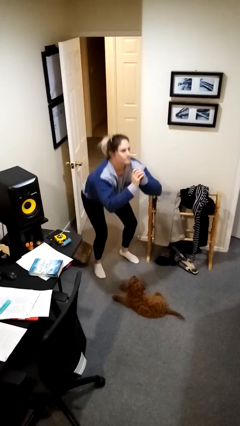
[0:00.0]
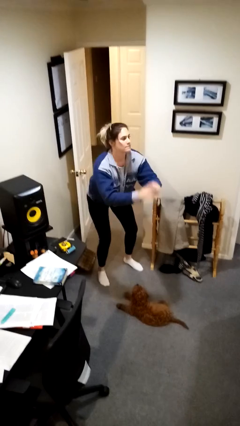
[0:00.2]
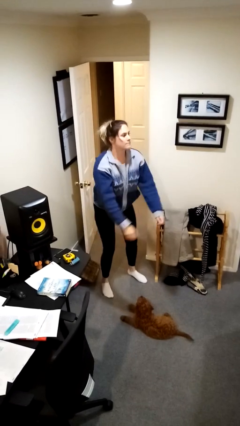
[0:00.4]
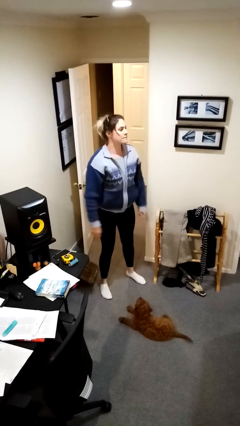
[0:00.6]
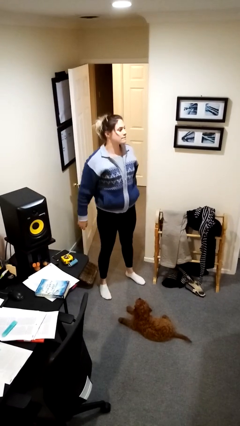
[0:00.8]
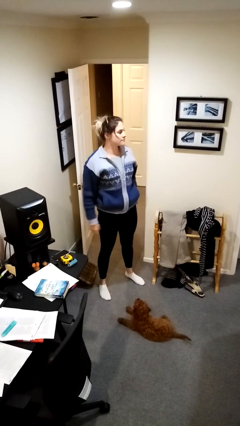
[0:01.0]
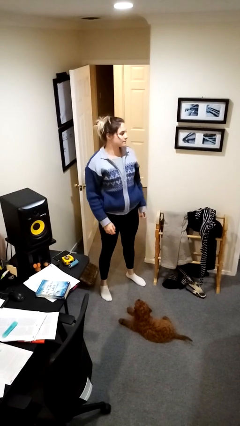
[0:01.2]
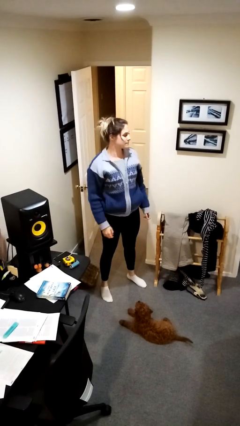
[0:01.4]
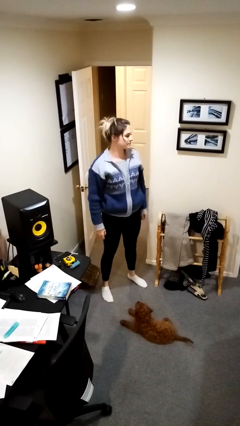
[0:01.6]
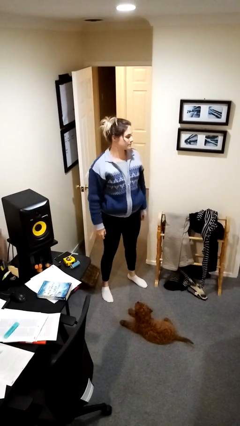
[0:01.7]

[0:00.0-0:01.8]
person stands up

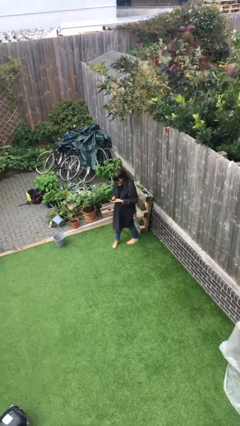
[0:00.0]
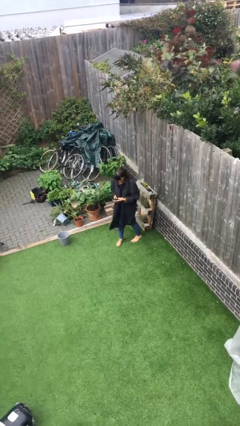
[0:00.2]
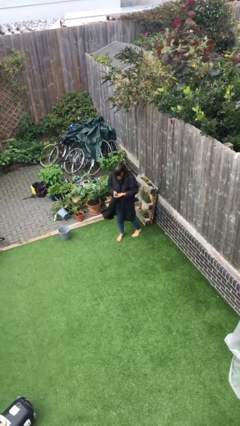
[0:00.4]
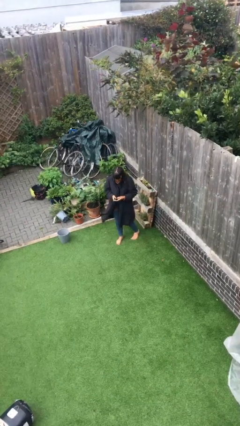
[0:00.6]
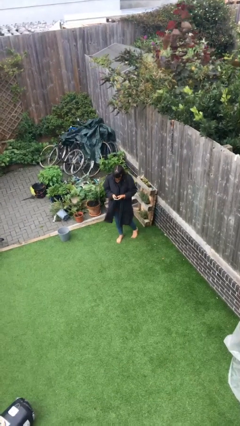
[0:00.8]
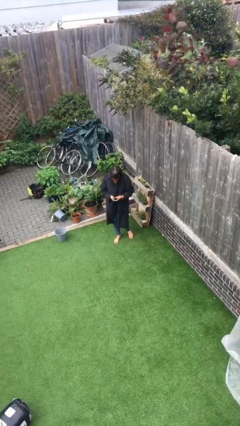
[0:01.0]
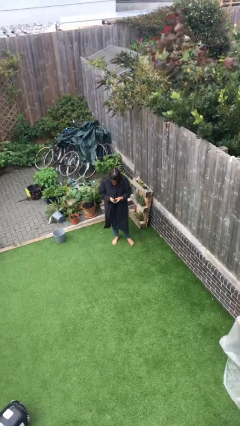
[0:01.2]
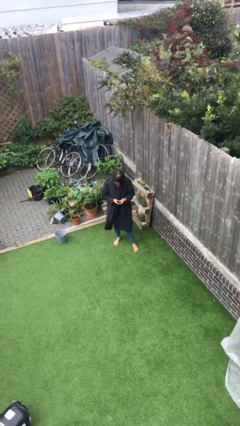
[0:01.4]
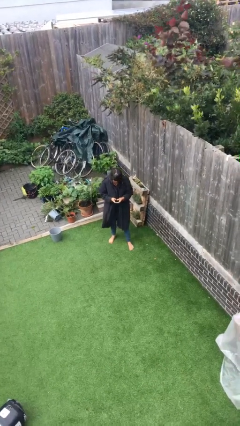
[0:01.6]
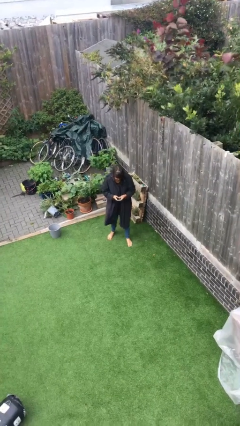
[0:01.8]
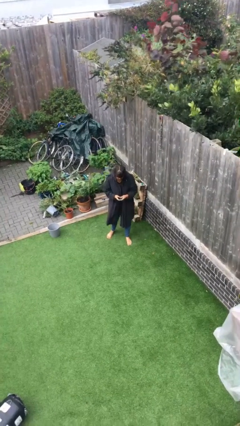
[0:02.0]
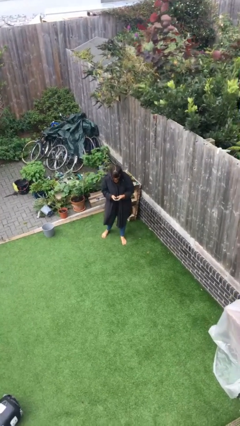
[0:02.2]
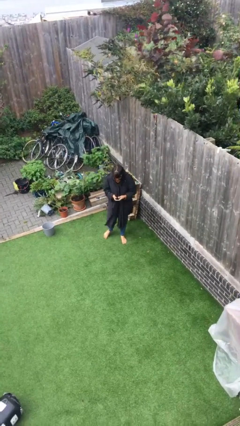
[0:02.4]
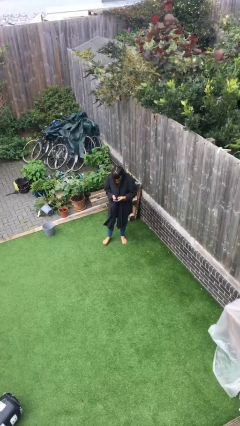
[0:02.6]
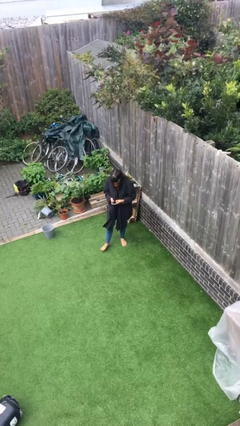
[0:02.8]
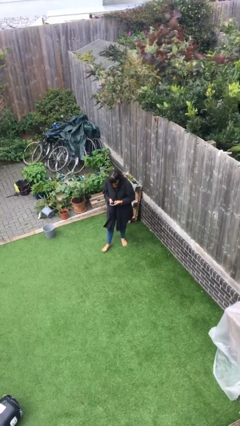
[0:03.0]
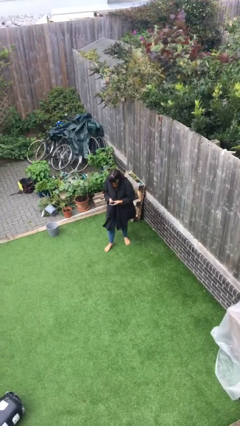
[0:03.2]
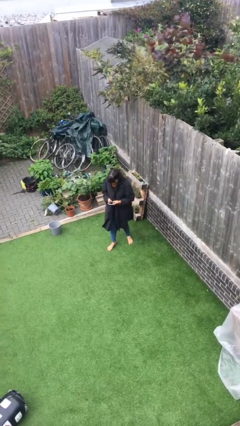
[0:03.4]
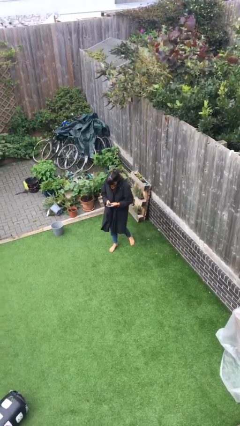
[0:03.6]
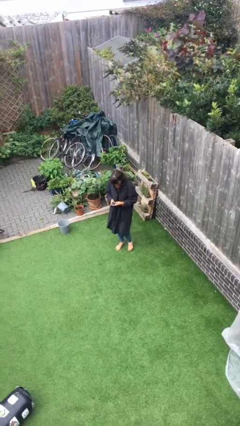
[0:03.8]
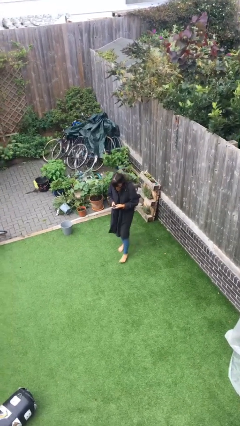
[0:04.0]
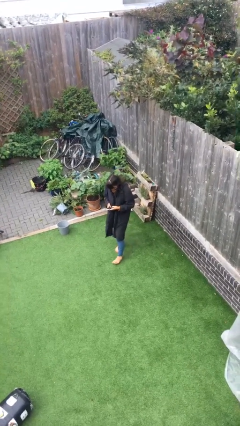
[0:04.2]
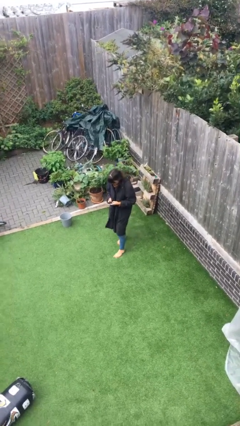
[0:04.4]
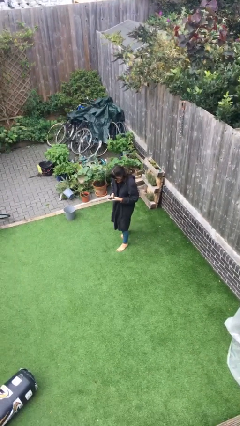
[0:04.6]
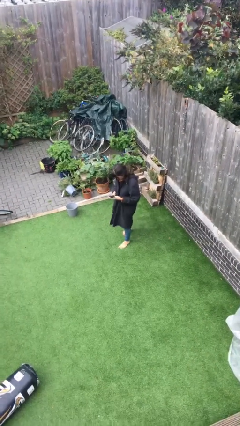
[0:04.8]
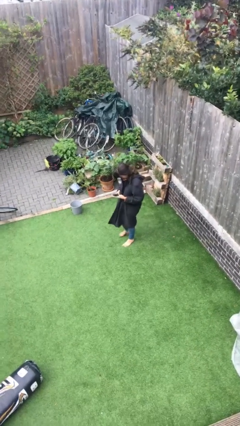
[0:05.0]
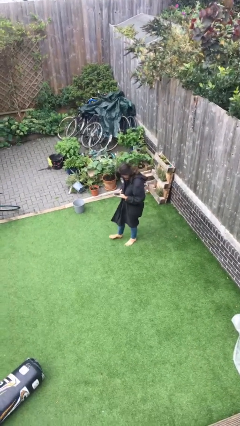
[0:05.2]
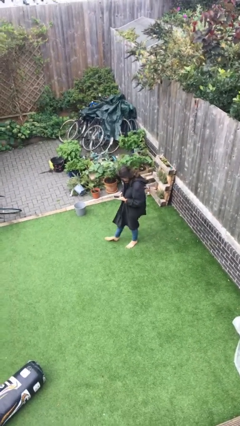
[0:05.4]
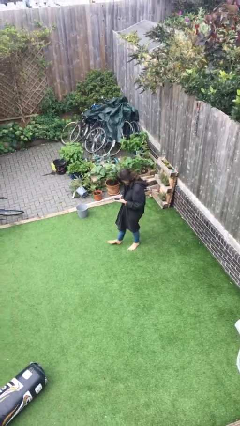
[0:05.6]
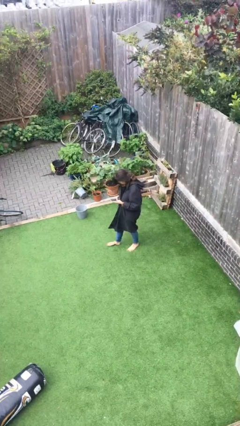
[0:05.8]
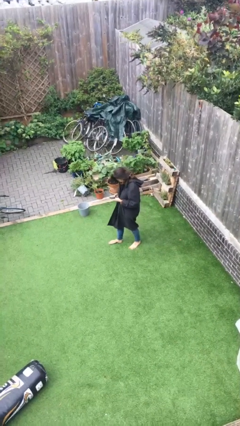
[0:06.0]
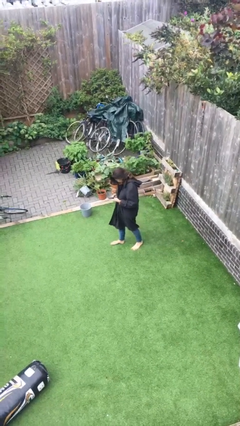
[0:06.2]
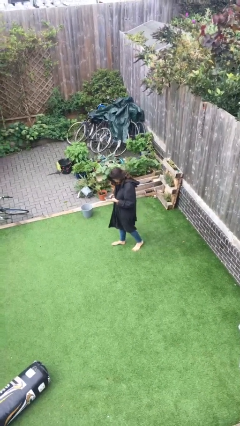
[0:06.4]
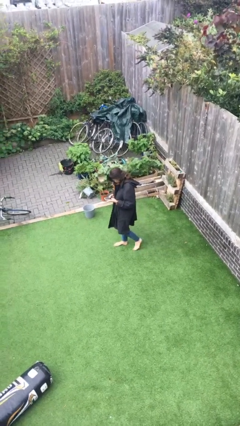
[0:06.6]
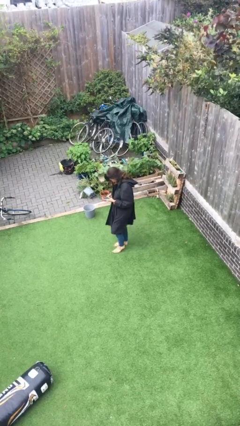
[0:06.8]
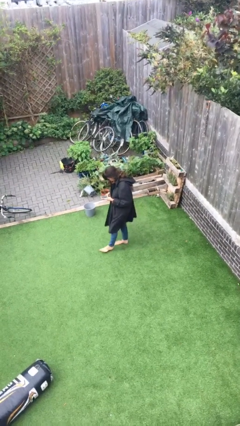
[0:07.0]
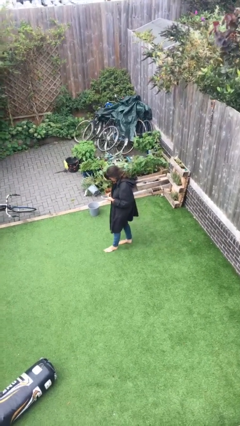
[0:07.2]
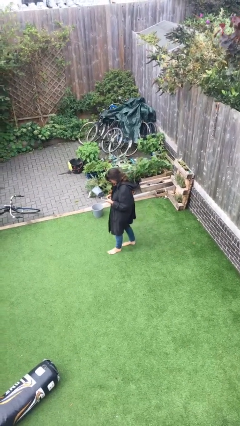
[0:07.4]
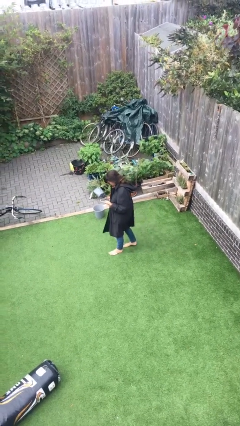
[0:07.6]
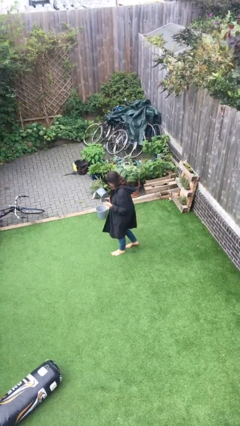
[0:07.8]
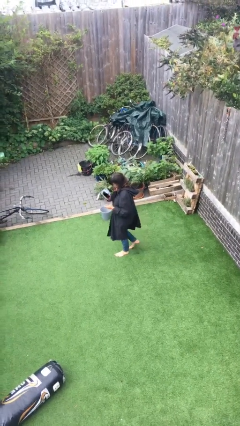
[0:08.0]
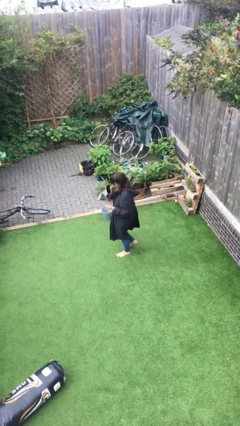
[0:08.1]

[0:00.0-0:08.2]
person texts on phone

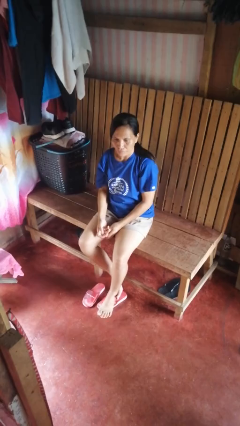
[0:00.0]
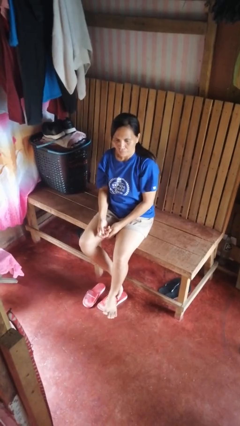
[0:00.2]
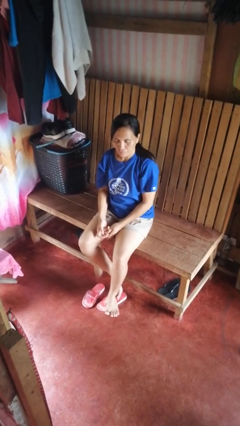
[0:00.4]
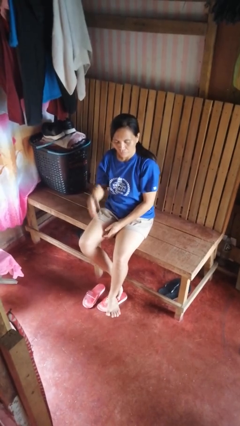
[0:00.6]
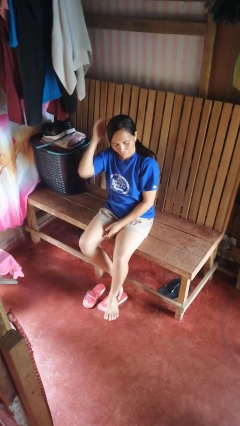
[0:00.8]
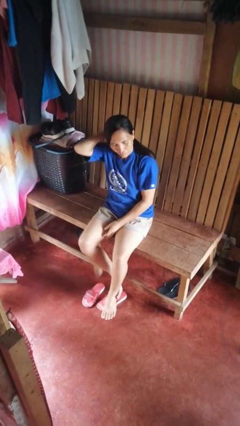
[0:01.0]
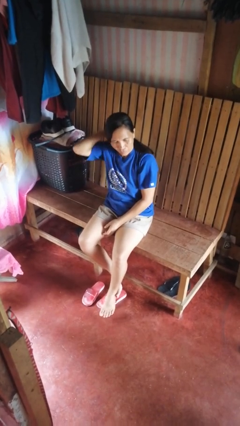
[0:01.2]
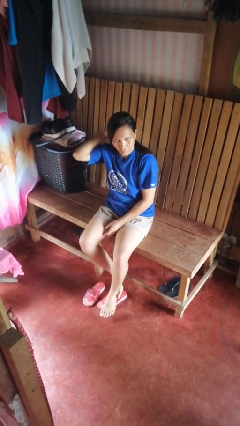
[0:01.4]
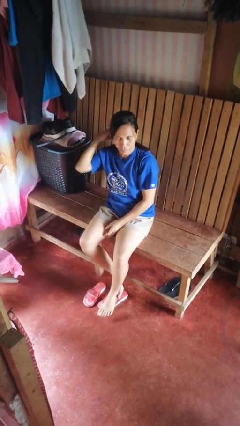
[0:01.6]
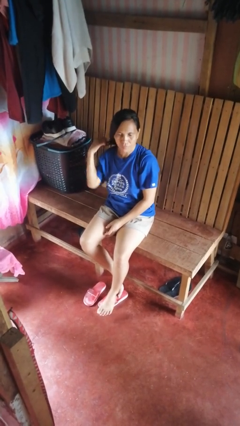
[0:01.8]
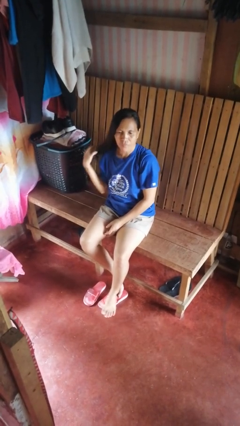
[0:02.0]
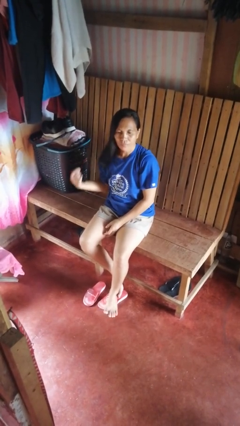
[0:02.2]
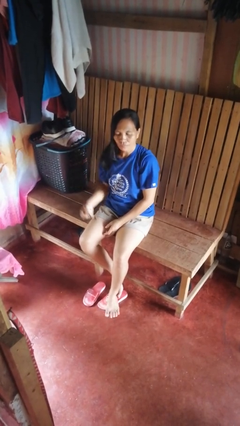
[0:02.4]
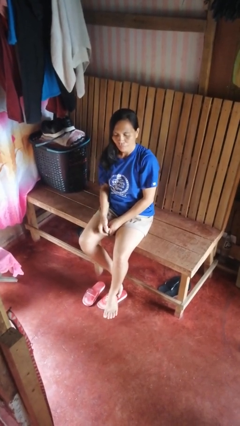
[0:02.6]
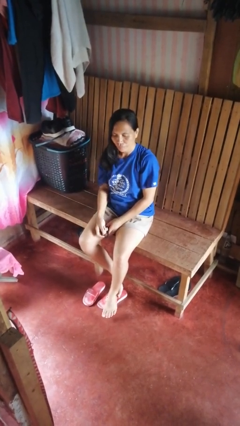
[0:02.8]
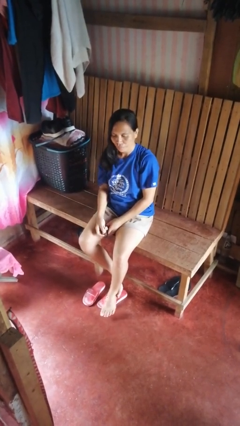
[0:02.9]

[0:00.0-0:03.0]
person takes off hairtie

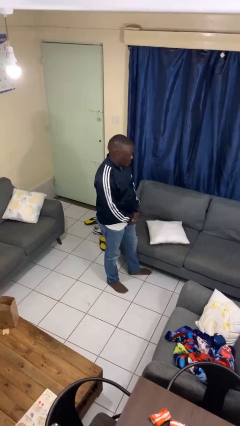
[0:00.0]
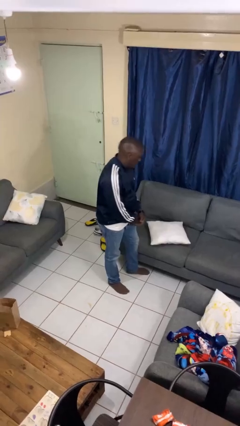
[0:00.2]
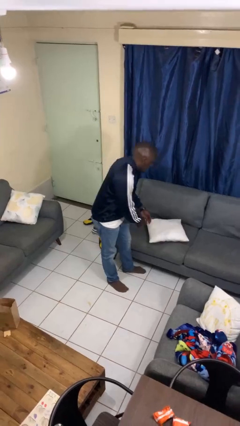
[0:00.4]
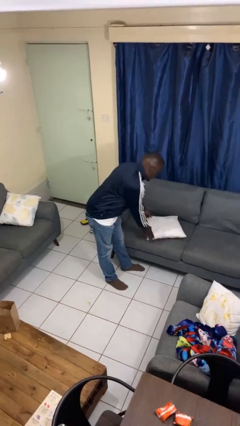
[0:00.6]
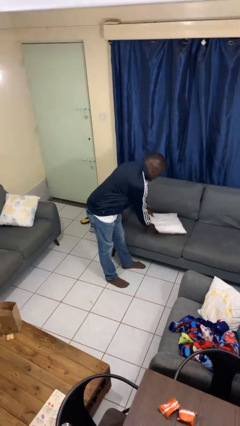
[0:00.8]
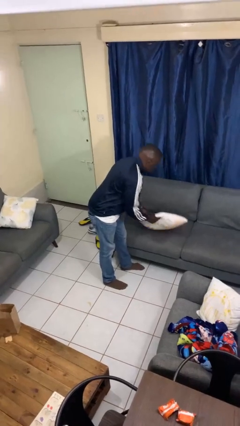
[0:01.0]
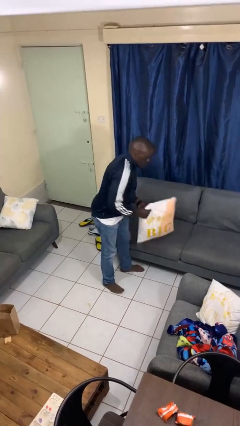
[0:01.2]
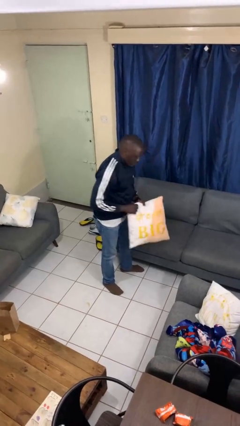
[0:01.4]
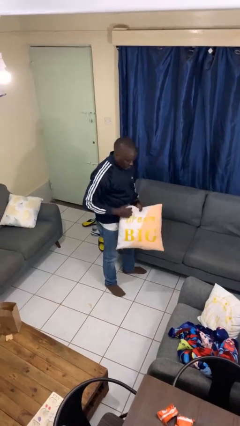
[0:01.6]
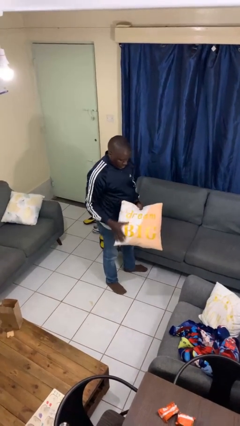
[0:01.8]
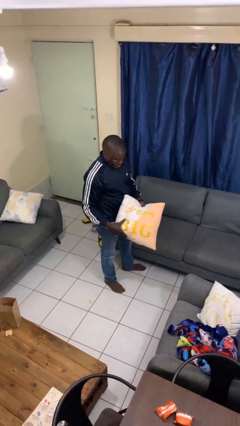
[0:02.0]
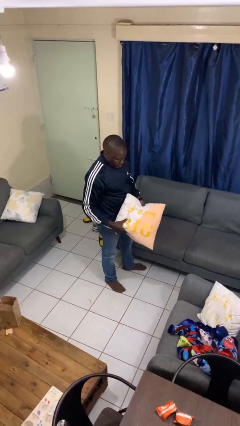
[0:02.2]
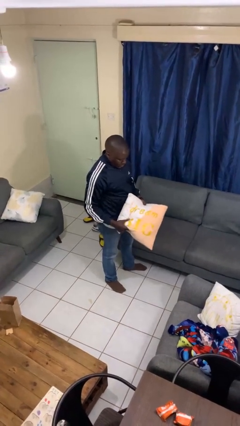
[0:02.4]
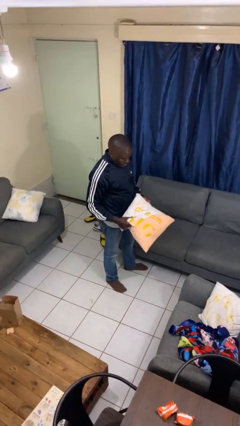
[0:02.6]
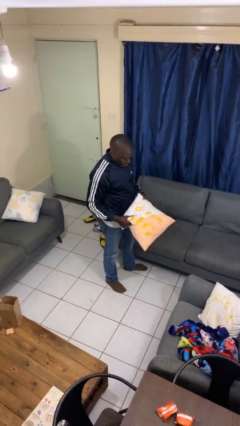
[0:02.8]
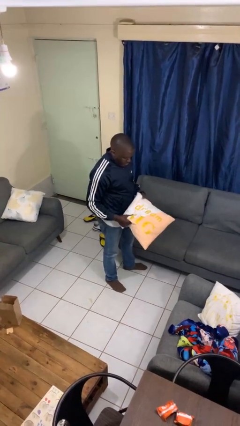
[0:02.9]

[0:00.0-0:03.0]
person picks up object from couch

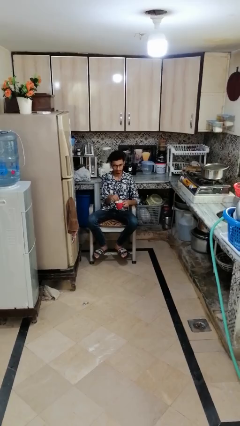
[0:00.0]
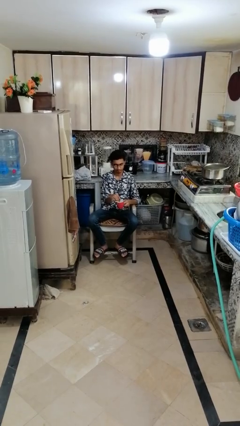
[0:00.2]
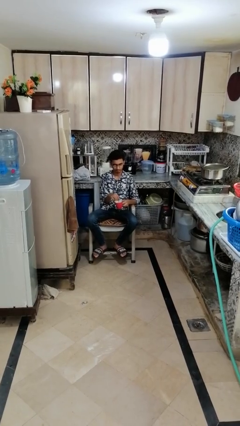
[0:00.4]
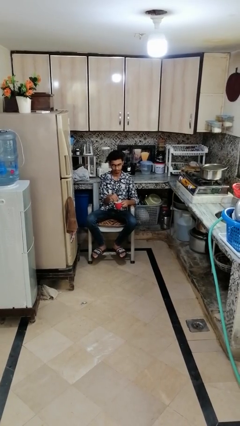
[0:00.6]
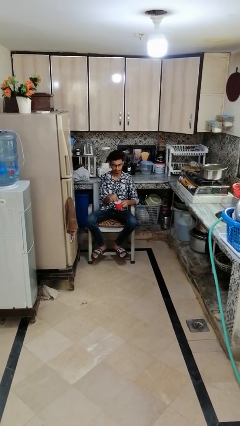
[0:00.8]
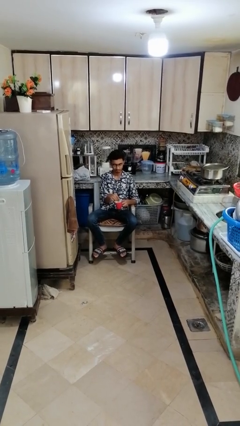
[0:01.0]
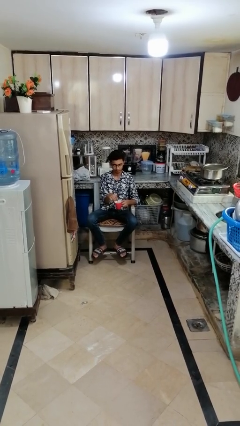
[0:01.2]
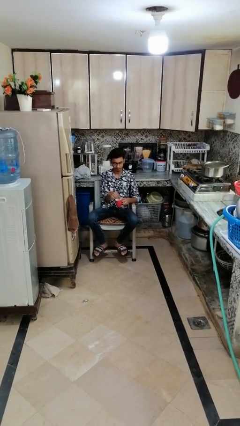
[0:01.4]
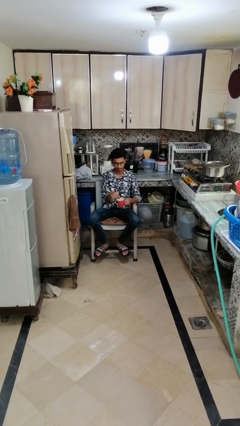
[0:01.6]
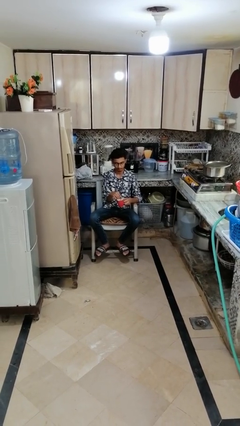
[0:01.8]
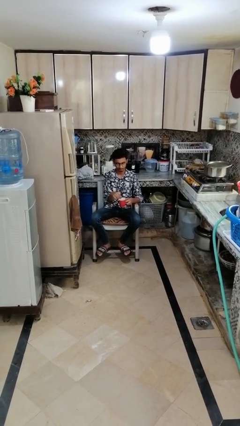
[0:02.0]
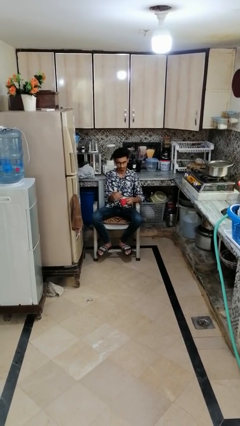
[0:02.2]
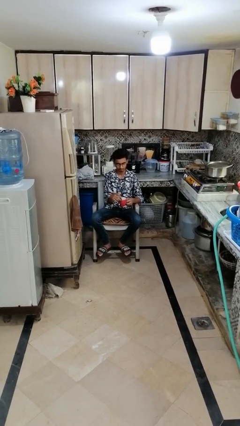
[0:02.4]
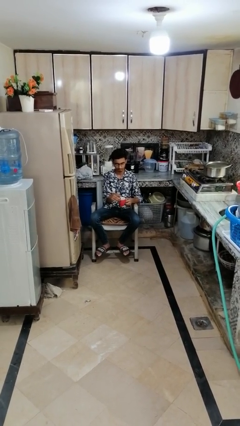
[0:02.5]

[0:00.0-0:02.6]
person stirs mug
